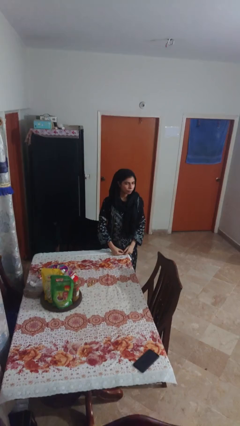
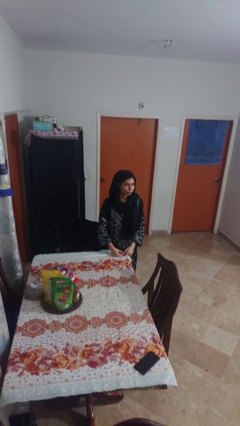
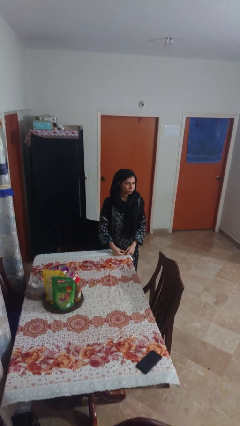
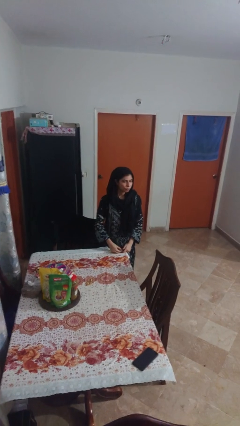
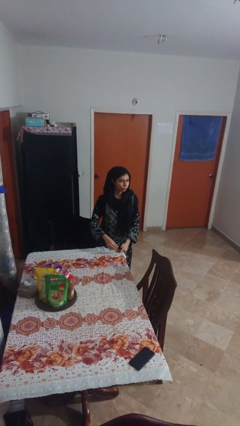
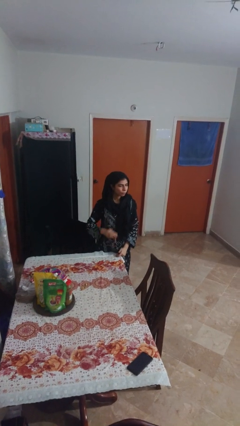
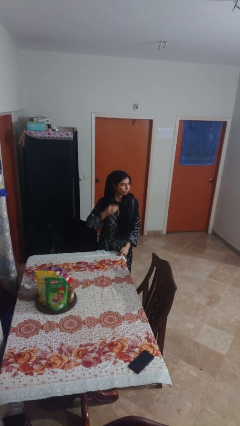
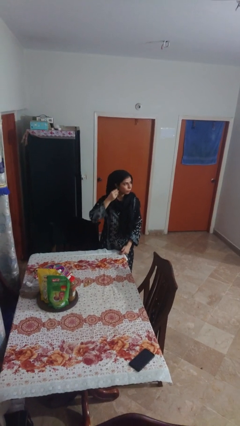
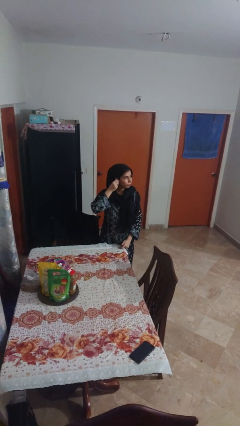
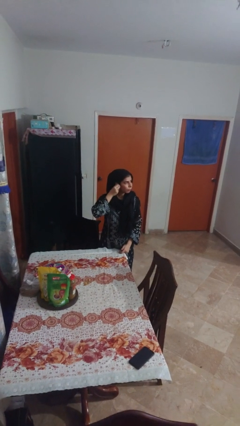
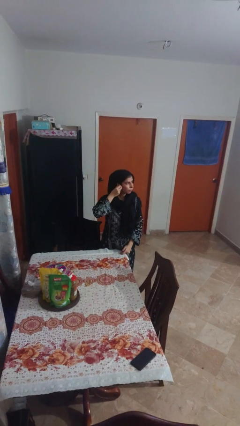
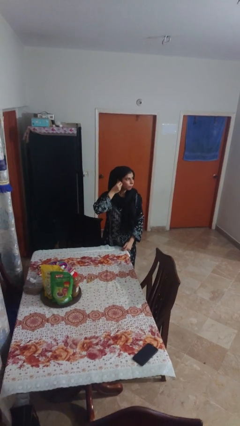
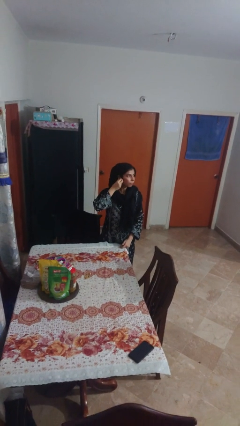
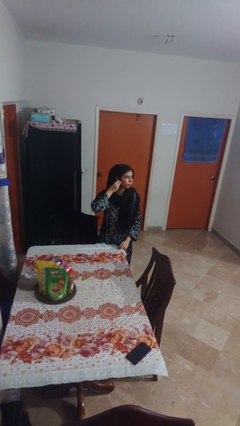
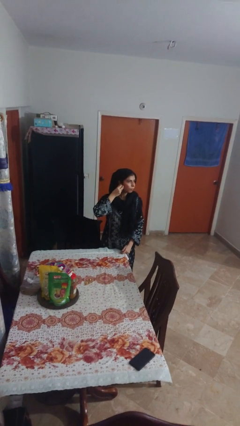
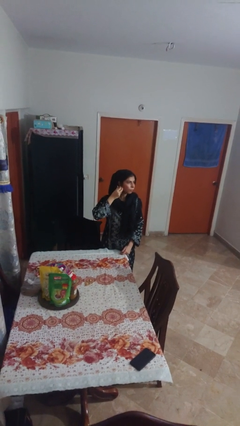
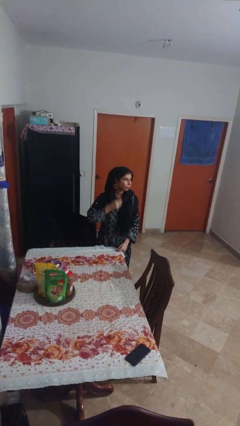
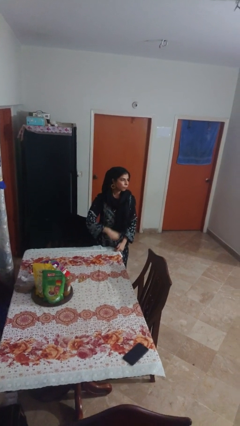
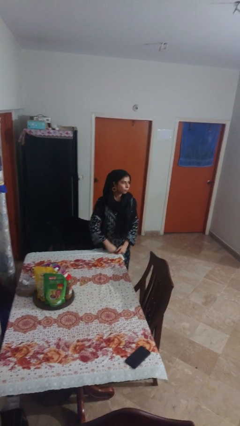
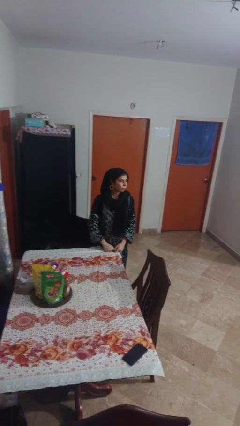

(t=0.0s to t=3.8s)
person puts on earrings

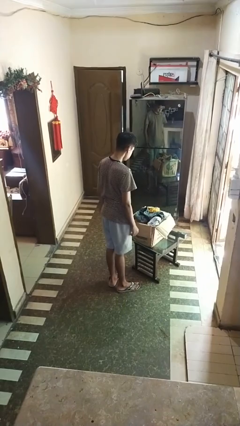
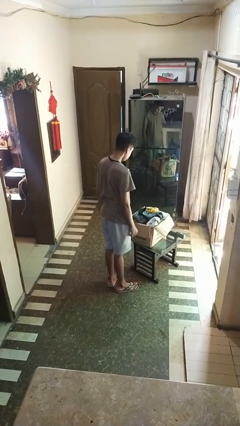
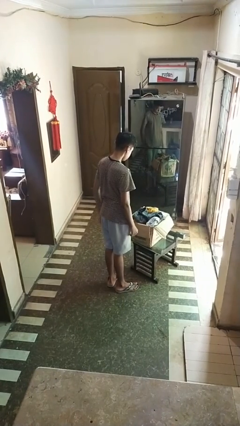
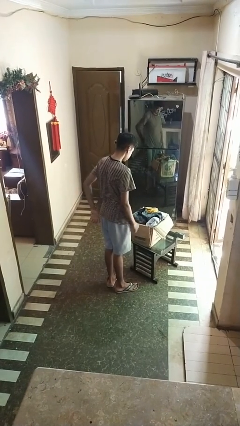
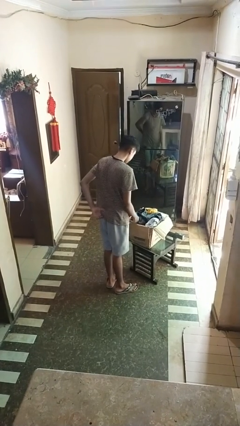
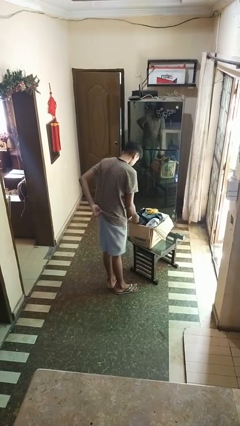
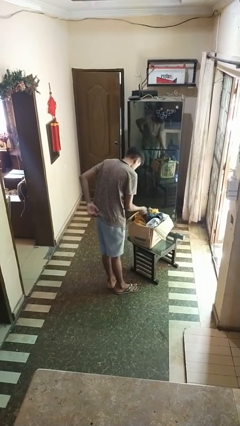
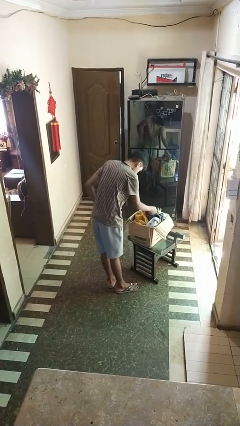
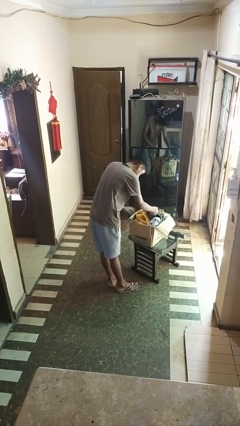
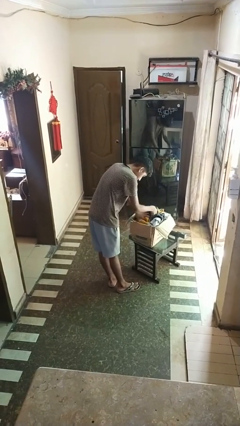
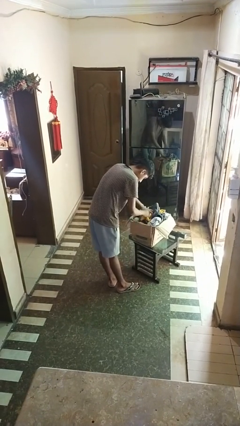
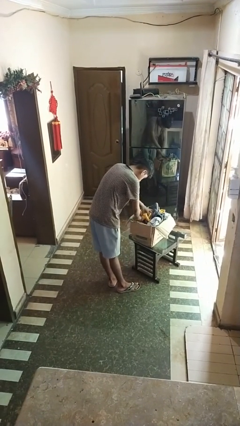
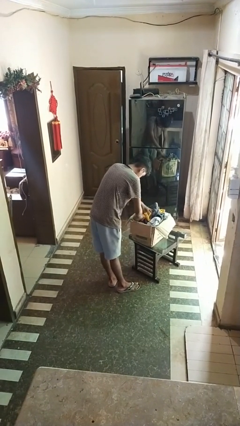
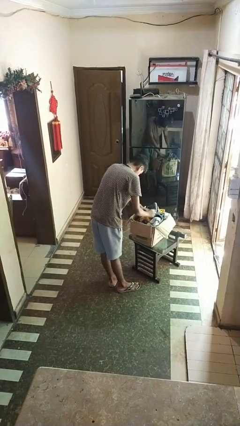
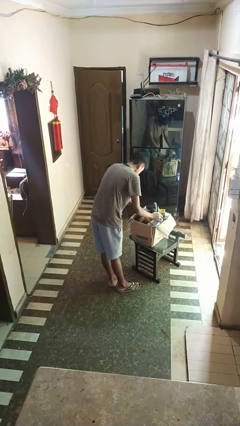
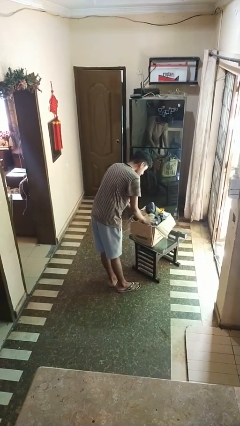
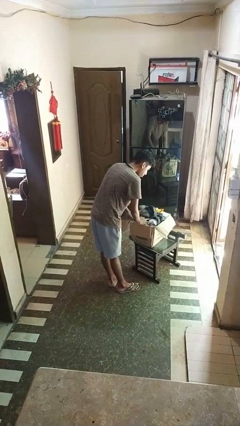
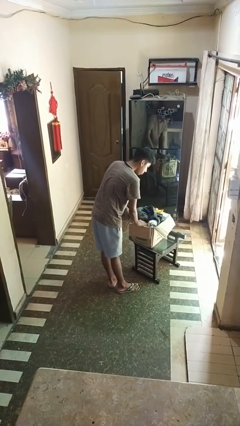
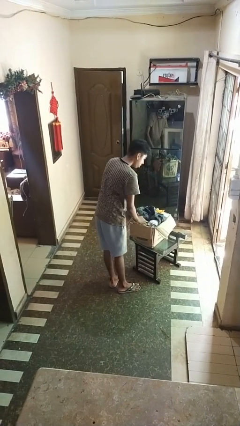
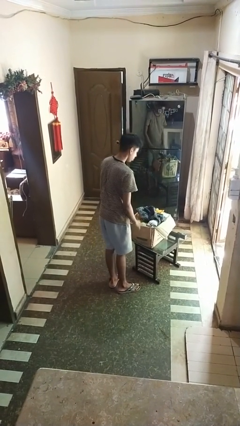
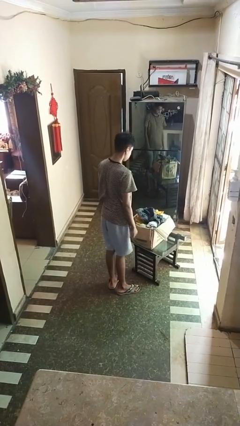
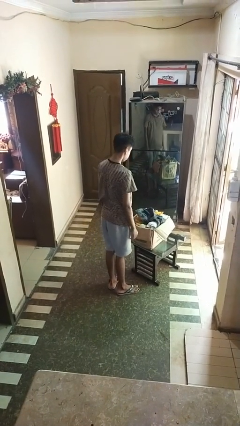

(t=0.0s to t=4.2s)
person searches in box

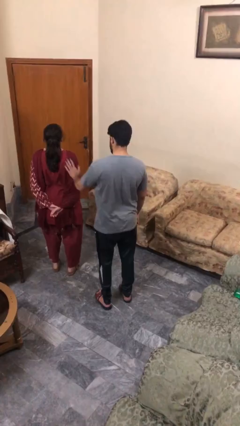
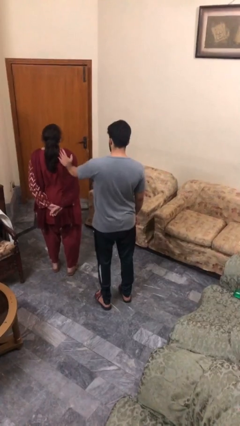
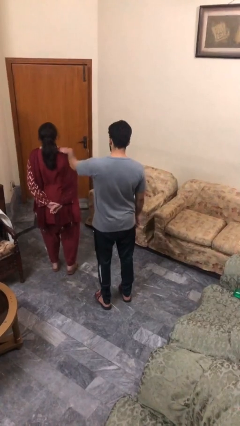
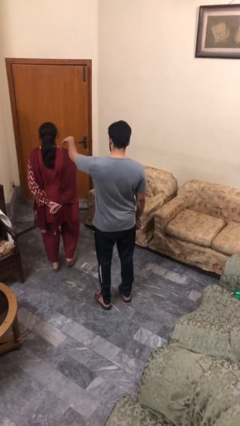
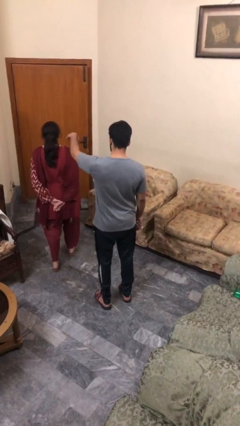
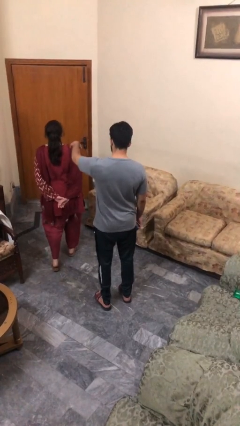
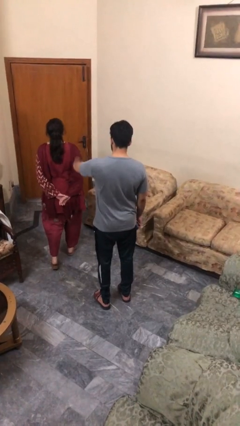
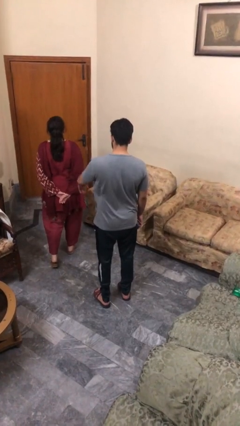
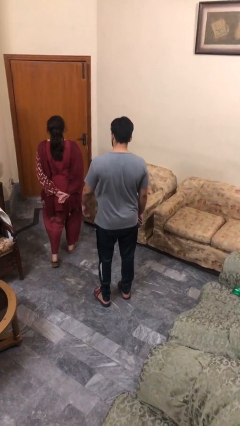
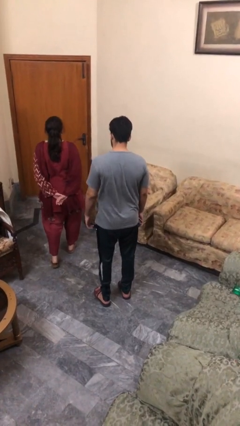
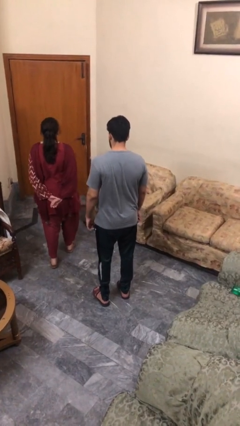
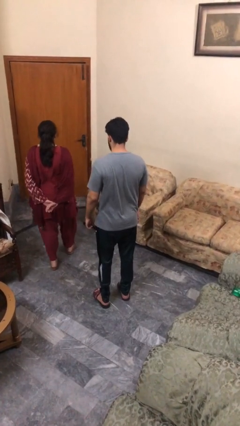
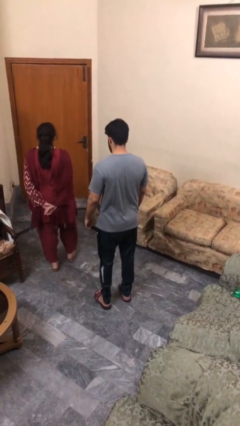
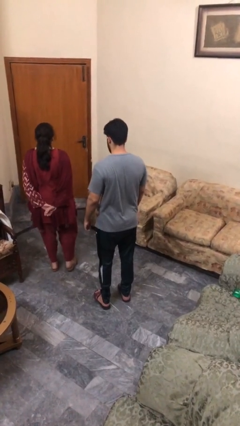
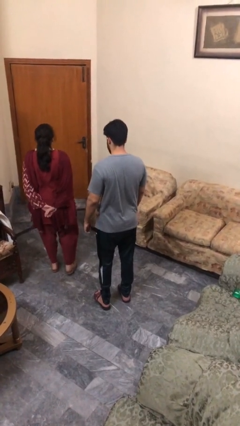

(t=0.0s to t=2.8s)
person shoves person

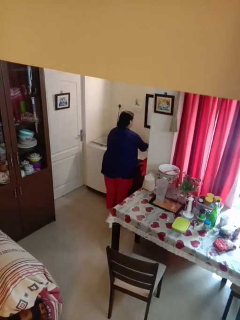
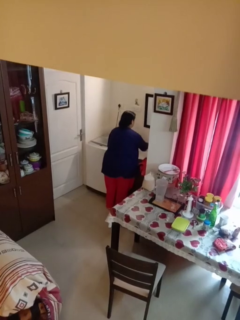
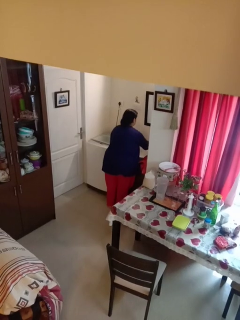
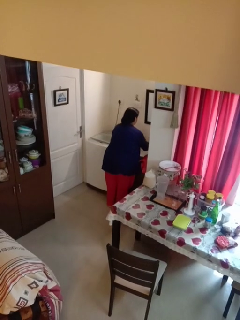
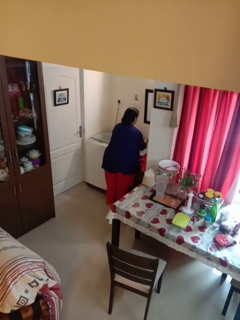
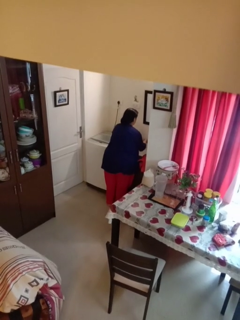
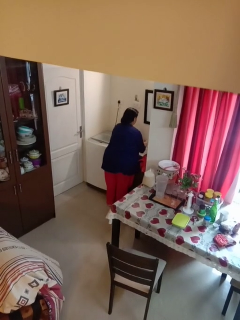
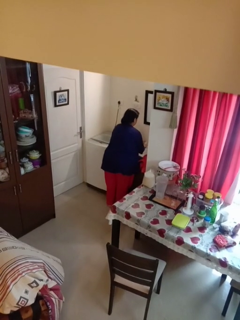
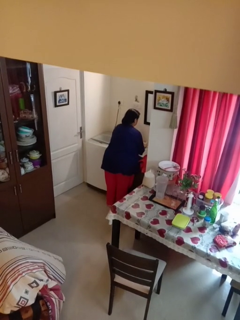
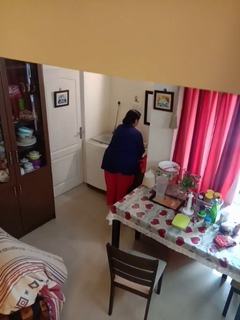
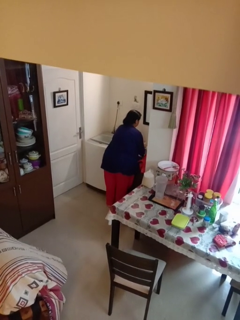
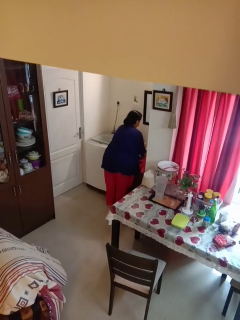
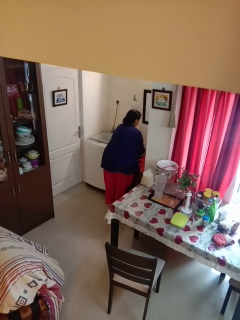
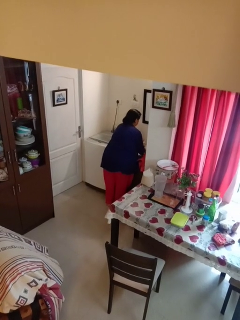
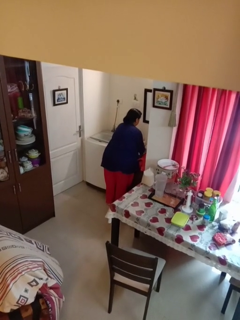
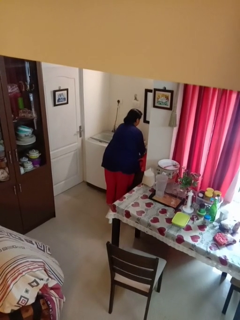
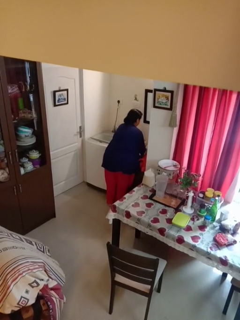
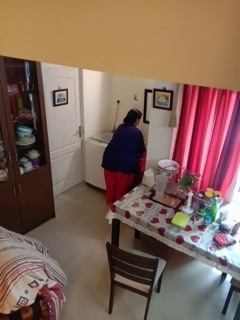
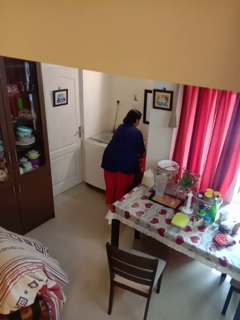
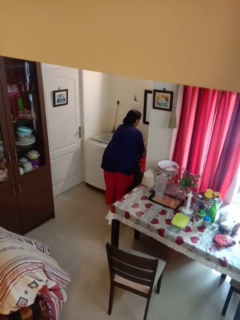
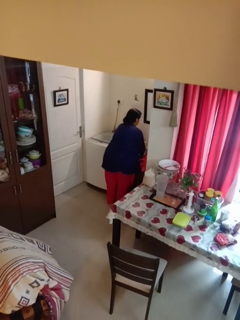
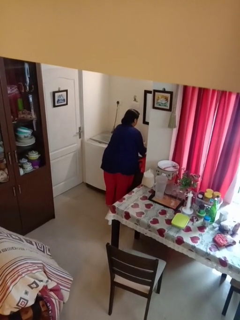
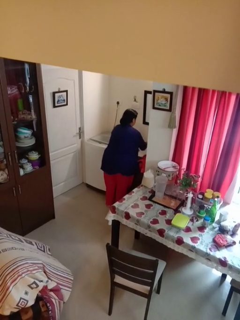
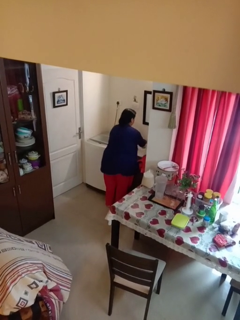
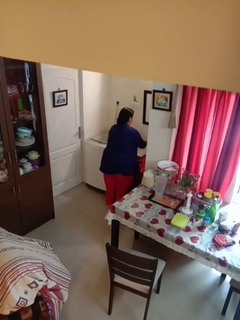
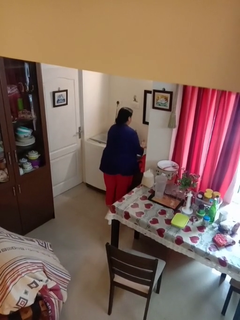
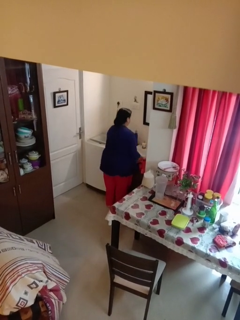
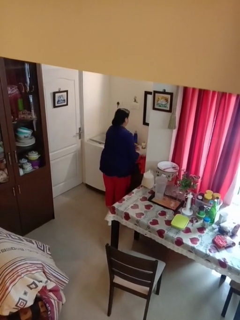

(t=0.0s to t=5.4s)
person washes hands

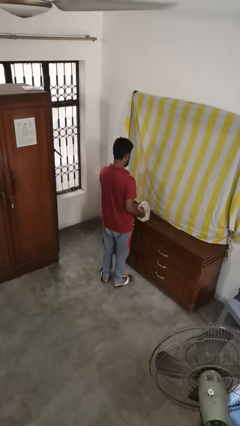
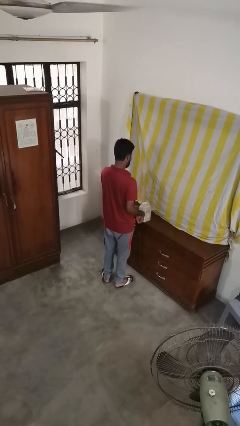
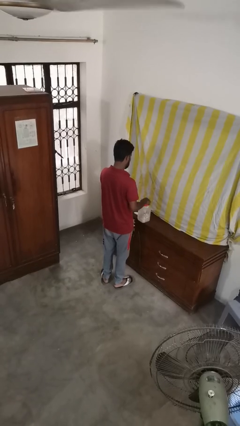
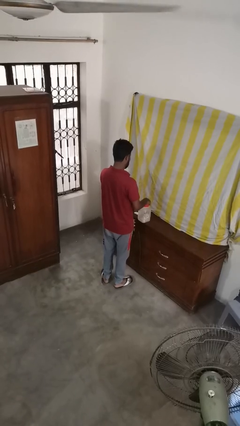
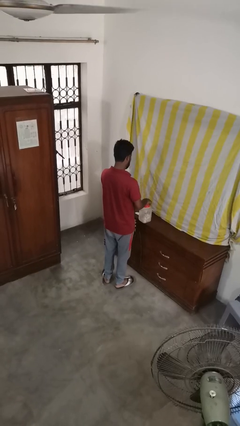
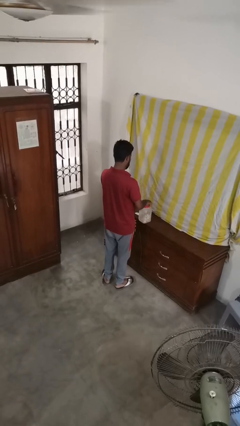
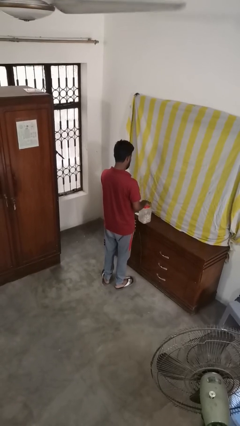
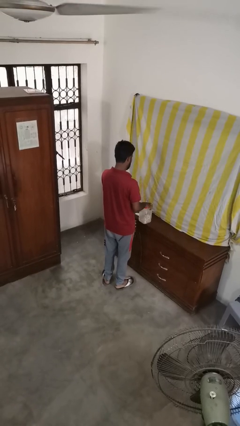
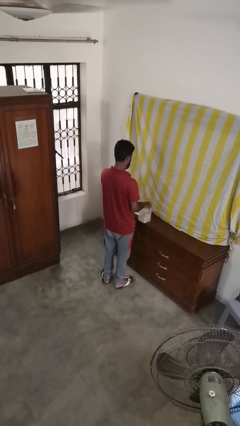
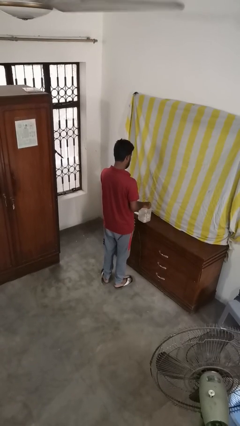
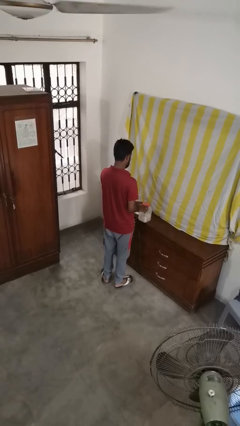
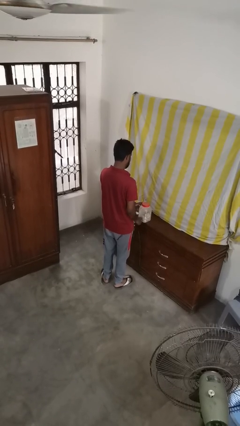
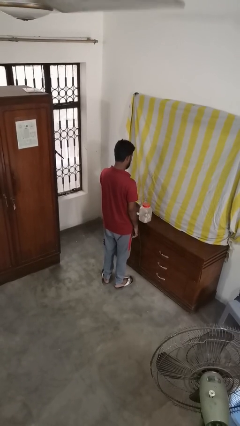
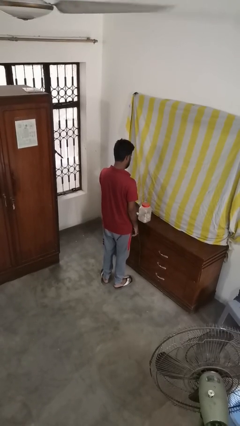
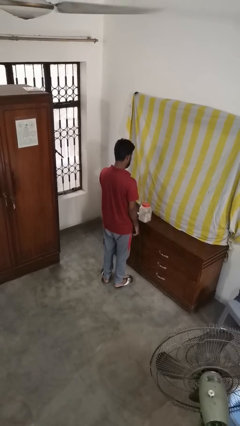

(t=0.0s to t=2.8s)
person closes jar
